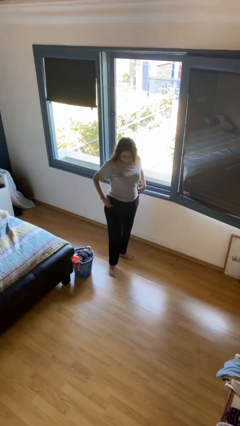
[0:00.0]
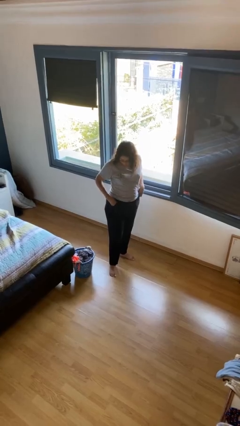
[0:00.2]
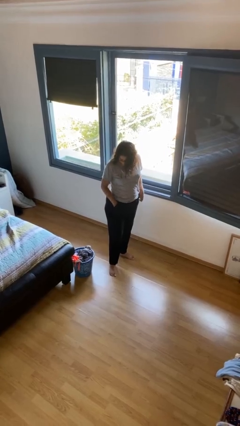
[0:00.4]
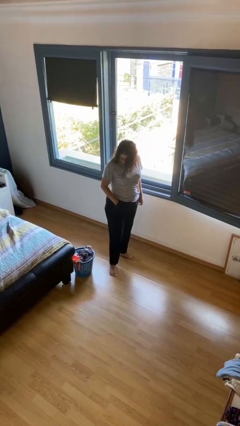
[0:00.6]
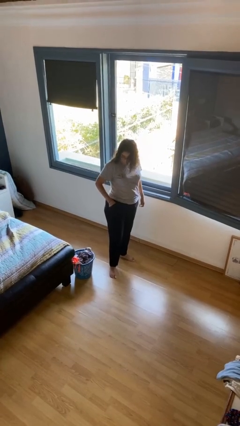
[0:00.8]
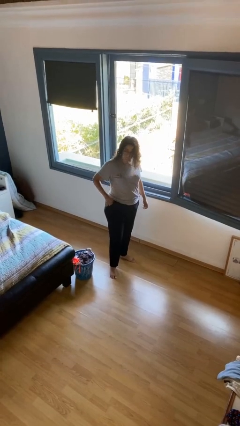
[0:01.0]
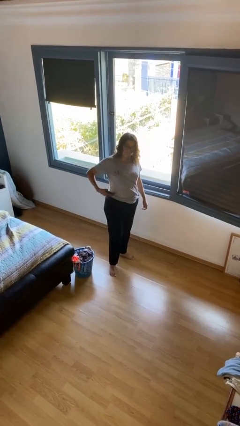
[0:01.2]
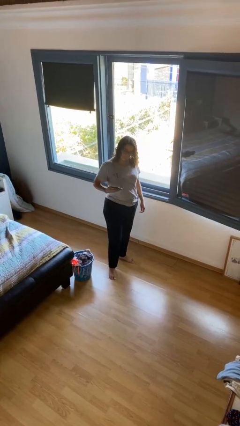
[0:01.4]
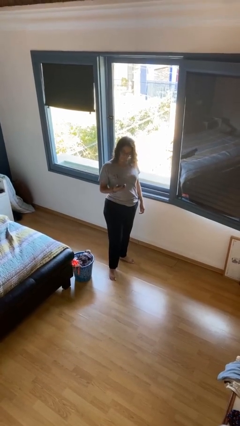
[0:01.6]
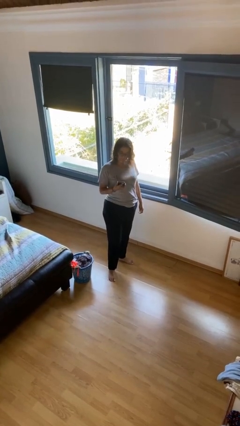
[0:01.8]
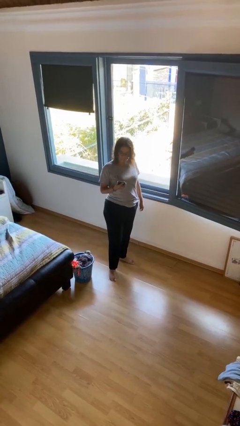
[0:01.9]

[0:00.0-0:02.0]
person takes phone from pocket

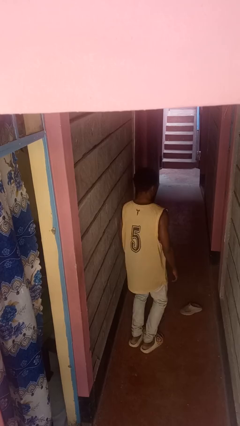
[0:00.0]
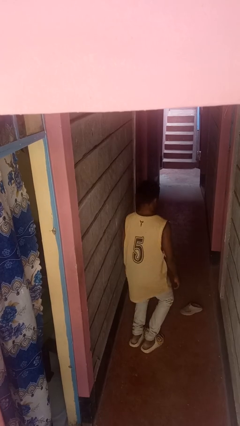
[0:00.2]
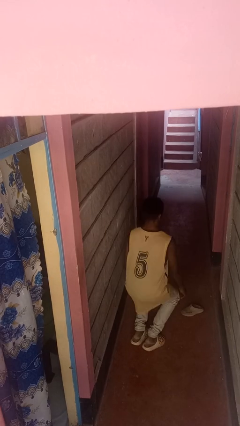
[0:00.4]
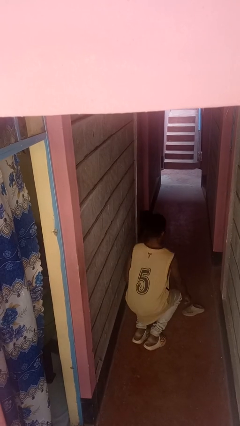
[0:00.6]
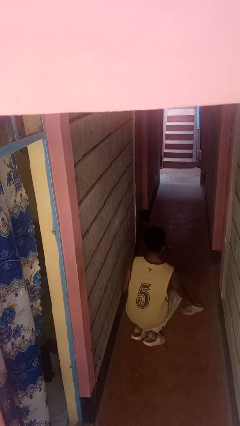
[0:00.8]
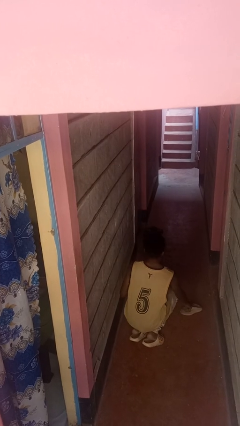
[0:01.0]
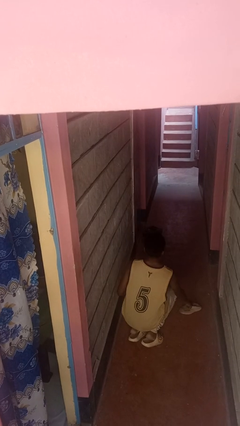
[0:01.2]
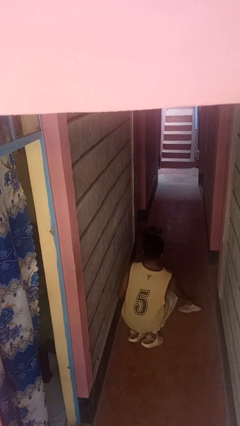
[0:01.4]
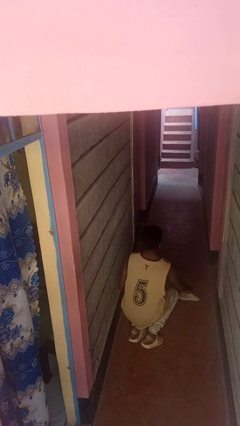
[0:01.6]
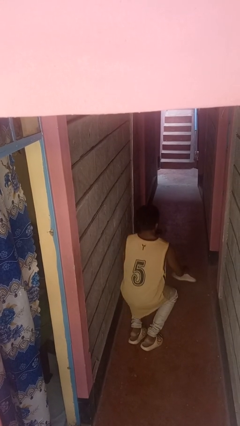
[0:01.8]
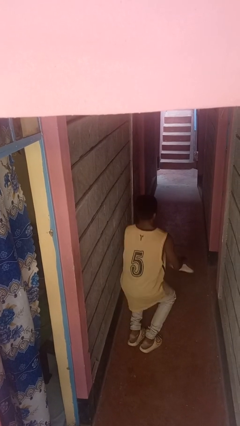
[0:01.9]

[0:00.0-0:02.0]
person picks up object from floor

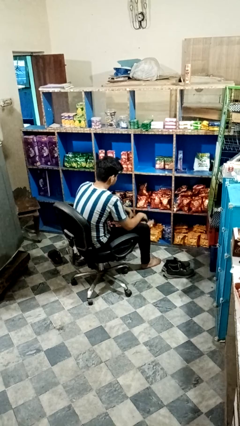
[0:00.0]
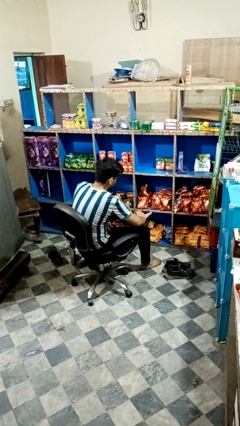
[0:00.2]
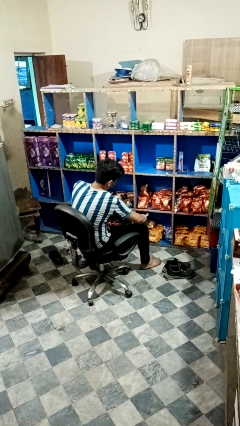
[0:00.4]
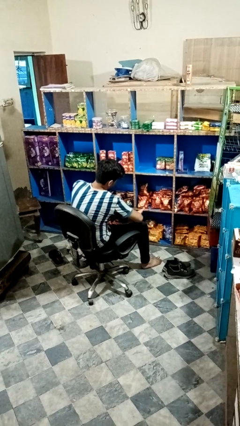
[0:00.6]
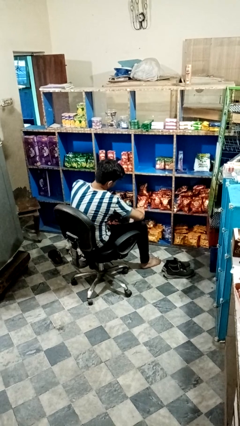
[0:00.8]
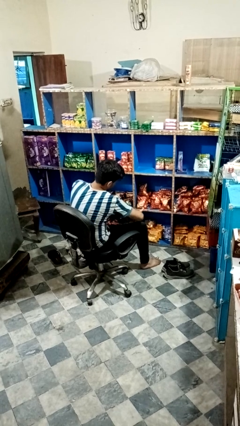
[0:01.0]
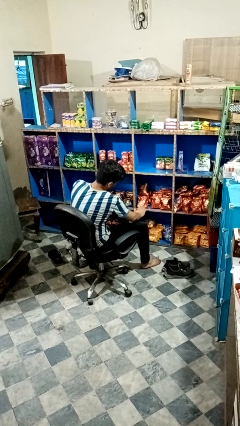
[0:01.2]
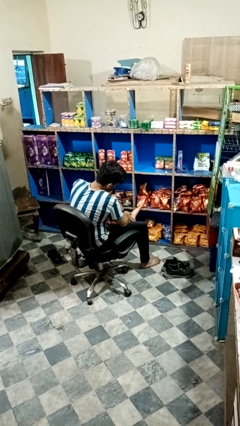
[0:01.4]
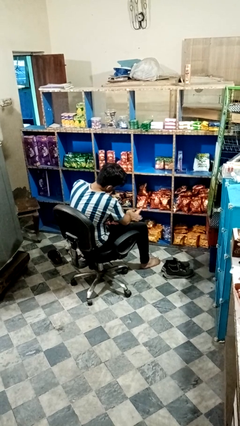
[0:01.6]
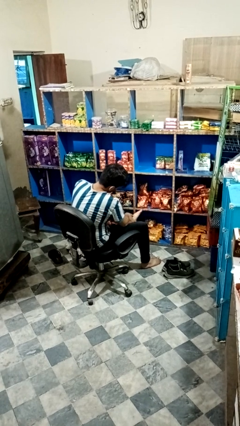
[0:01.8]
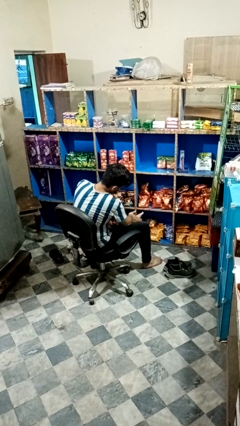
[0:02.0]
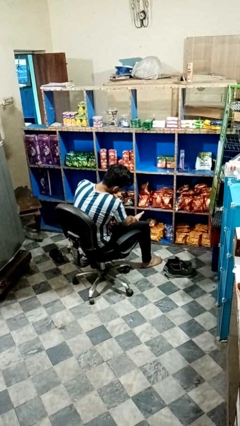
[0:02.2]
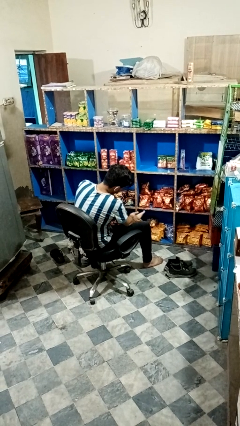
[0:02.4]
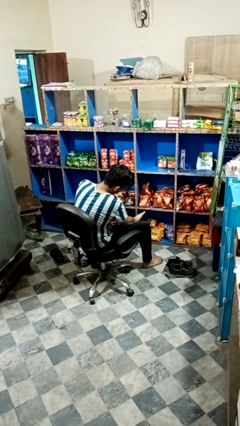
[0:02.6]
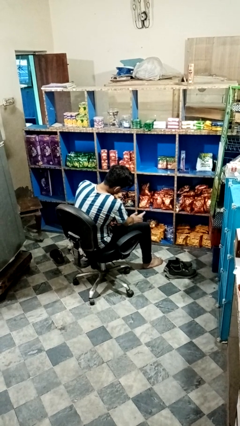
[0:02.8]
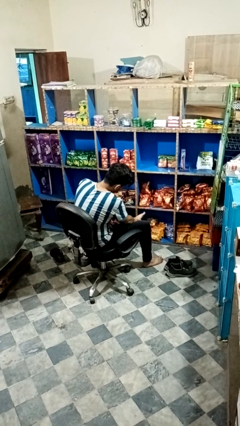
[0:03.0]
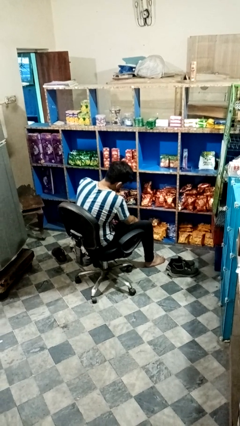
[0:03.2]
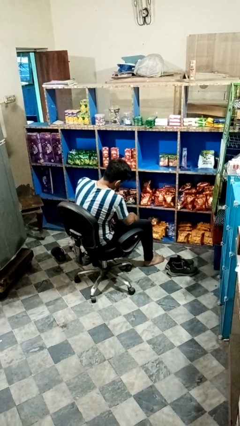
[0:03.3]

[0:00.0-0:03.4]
person rubs foot

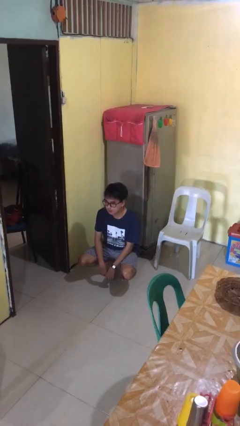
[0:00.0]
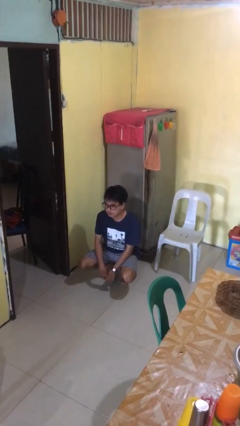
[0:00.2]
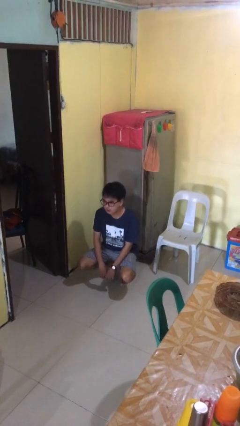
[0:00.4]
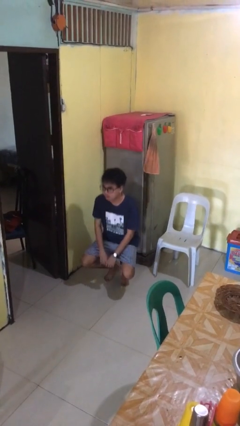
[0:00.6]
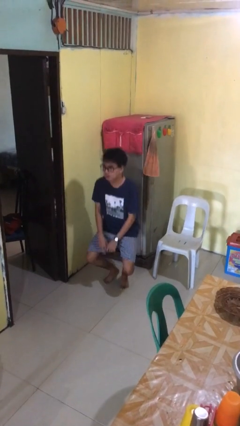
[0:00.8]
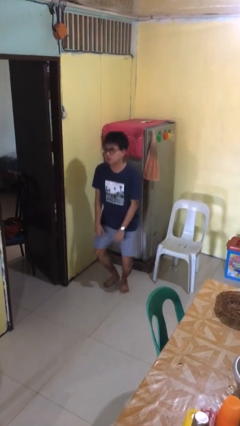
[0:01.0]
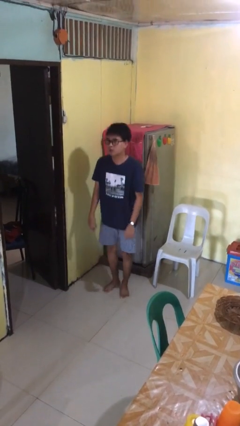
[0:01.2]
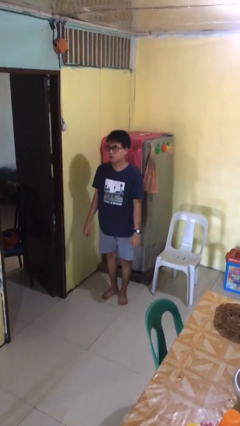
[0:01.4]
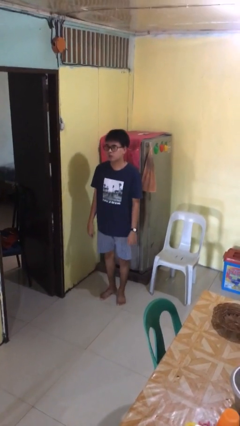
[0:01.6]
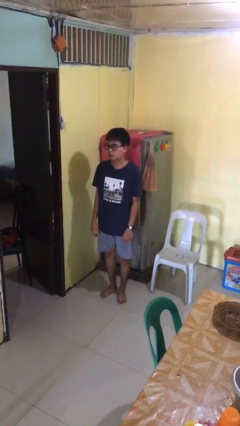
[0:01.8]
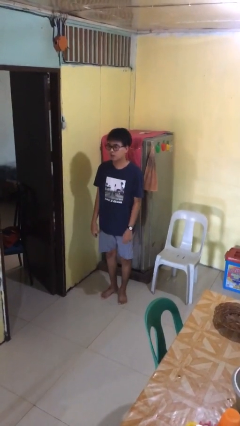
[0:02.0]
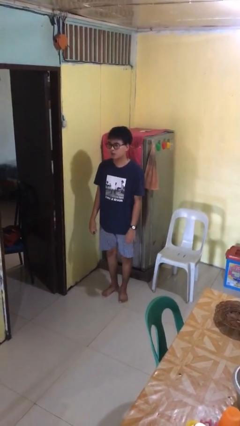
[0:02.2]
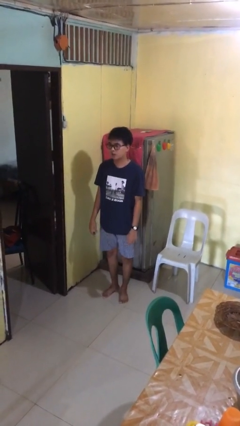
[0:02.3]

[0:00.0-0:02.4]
person stands up

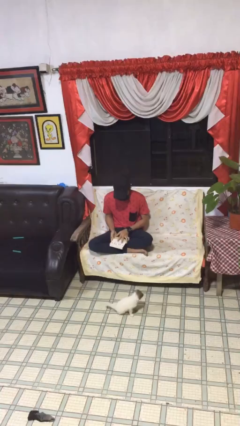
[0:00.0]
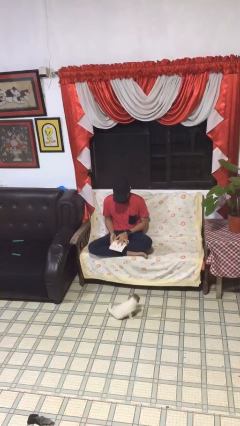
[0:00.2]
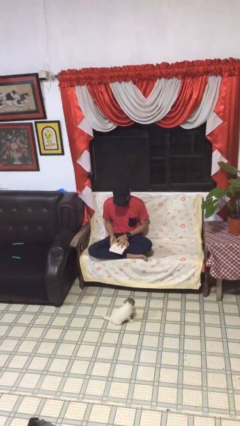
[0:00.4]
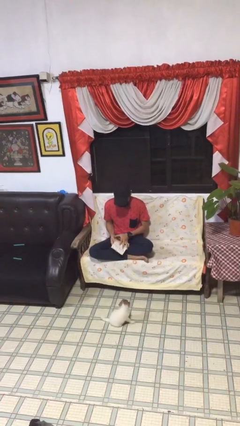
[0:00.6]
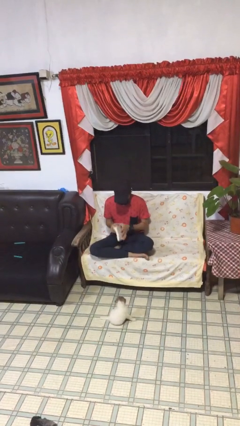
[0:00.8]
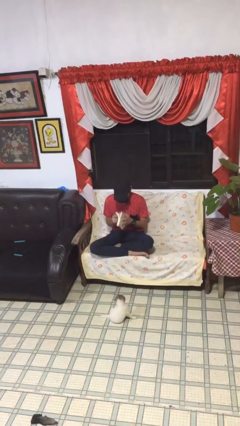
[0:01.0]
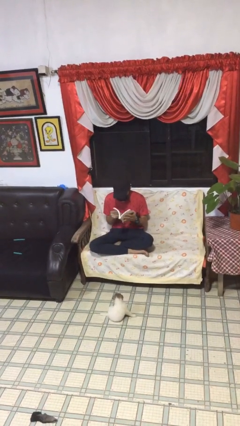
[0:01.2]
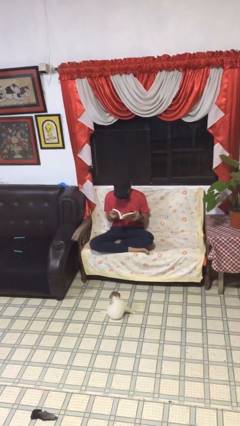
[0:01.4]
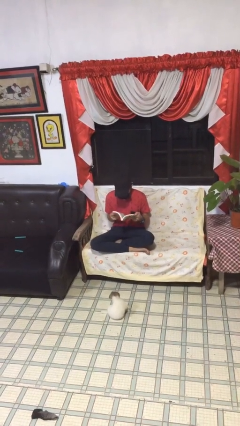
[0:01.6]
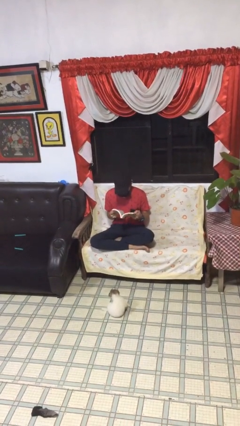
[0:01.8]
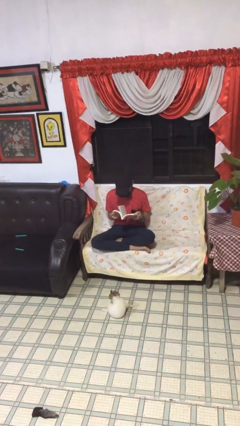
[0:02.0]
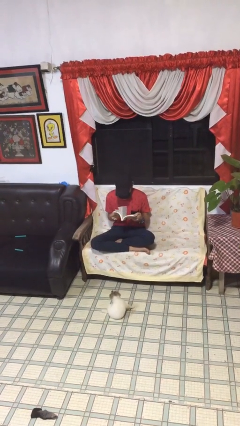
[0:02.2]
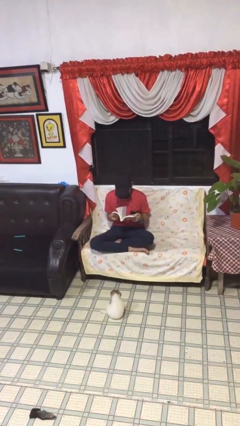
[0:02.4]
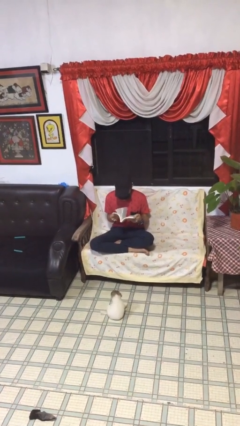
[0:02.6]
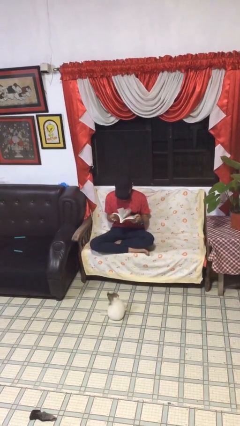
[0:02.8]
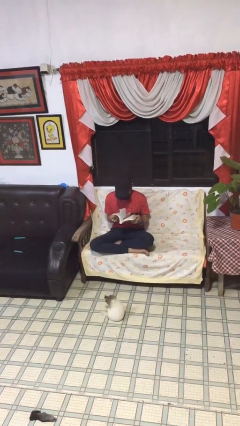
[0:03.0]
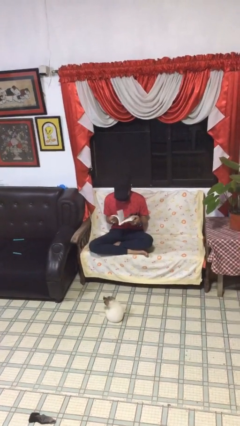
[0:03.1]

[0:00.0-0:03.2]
person reads document

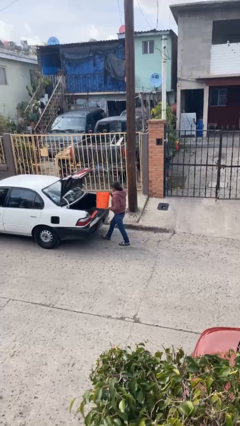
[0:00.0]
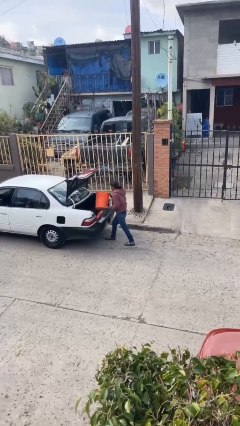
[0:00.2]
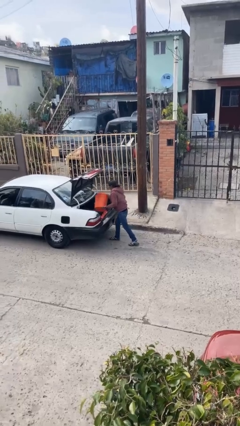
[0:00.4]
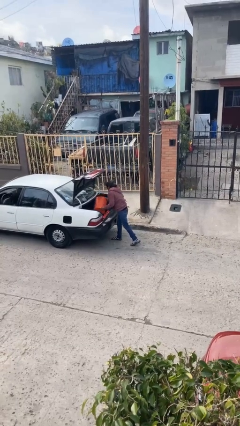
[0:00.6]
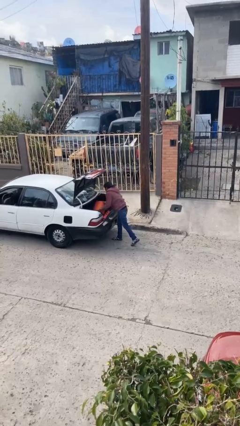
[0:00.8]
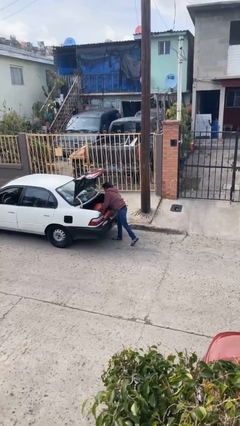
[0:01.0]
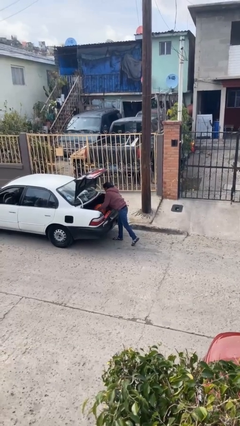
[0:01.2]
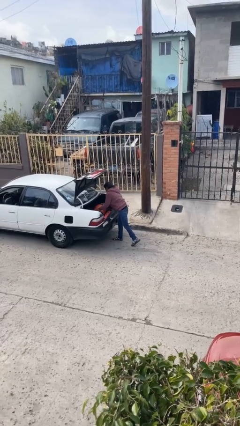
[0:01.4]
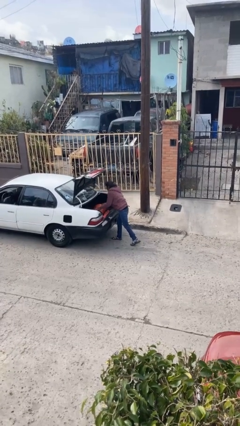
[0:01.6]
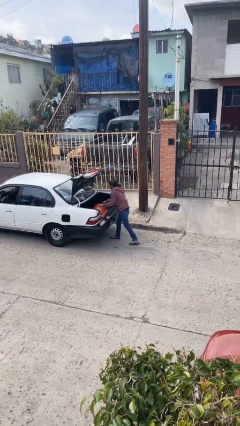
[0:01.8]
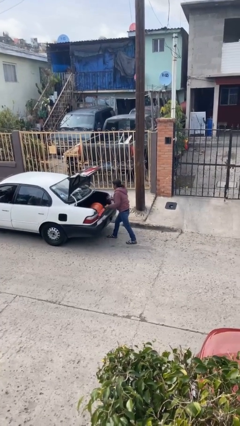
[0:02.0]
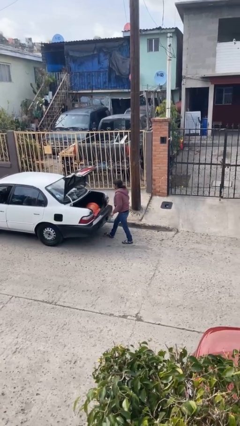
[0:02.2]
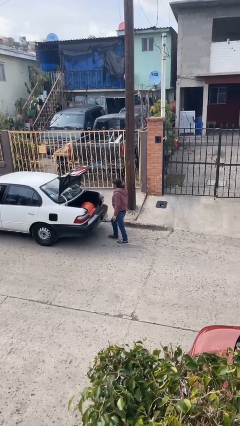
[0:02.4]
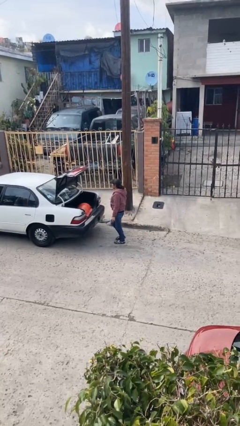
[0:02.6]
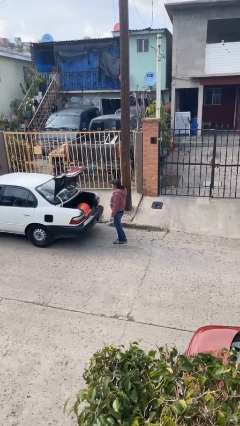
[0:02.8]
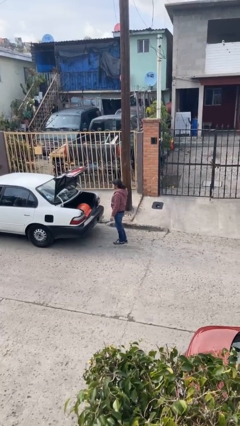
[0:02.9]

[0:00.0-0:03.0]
person loads car

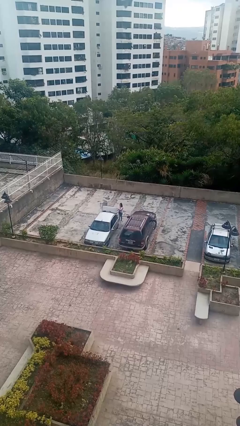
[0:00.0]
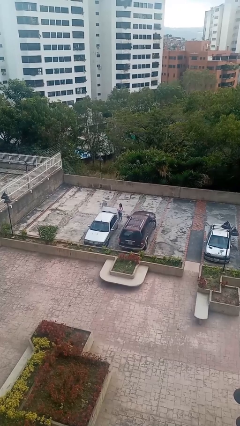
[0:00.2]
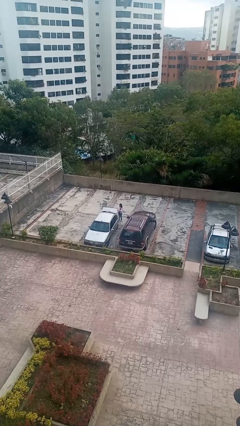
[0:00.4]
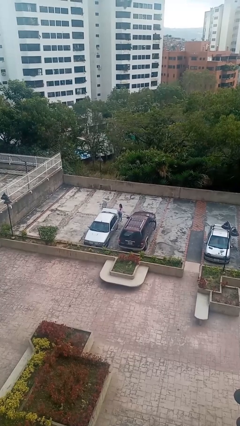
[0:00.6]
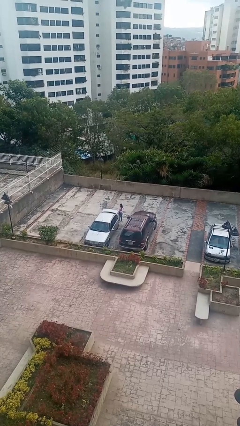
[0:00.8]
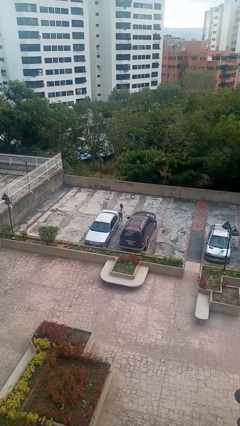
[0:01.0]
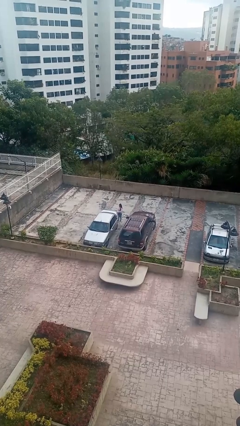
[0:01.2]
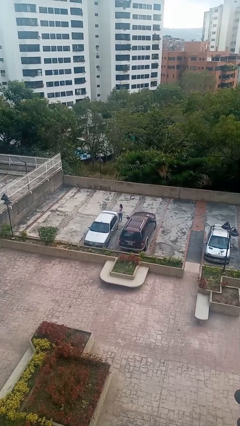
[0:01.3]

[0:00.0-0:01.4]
person closes car trunk
